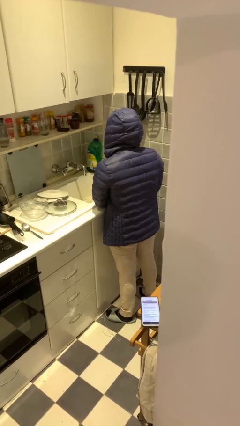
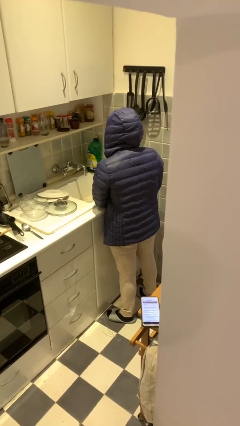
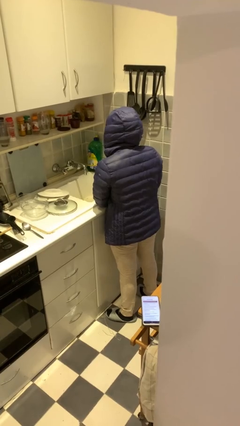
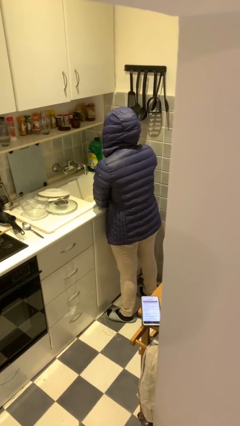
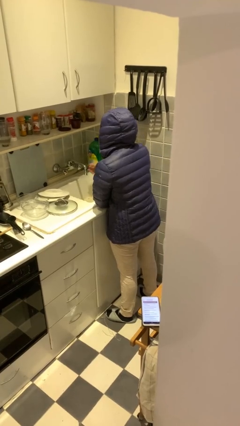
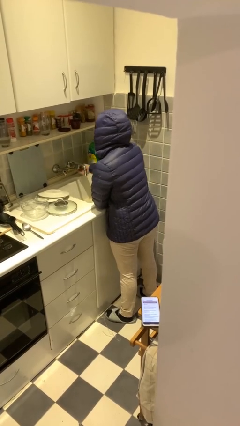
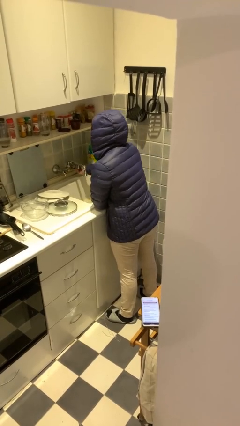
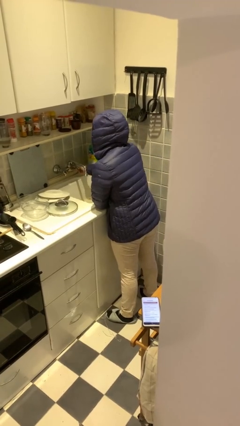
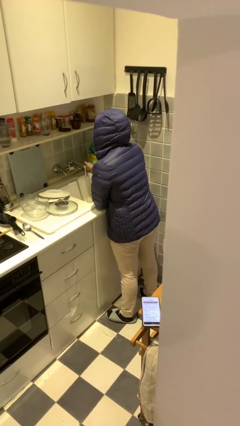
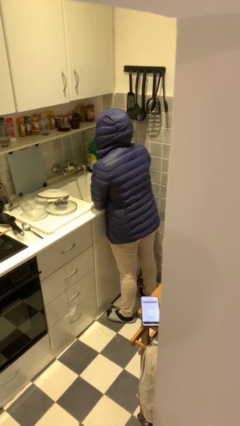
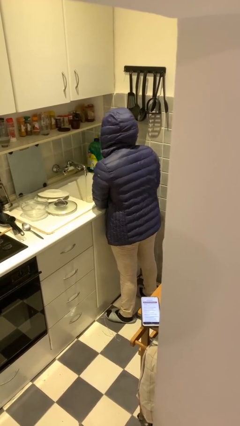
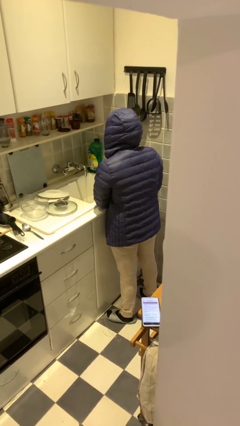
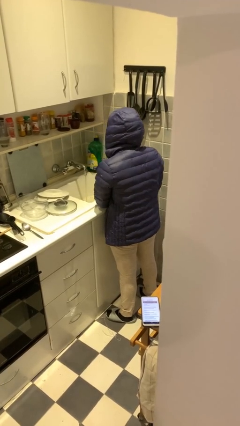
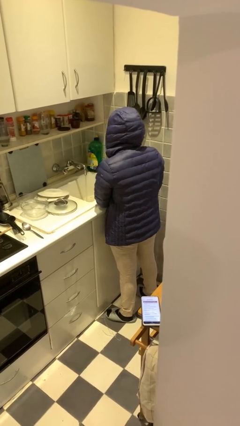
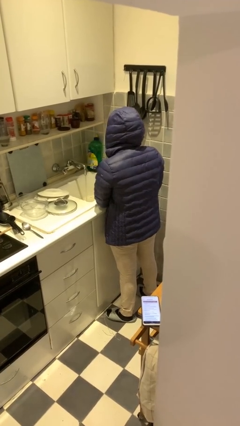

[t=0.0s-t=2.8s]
person turns on faucet

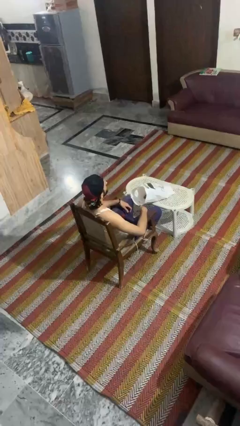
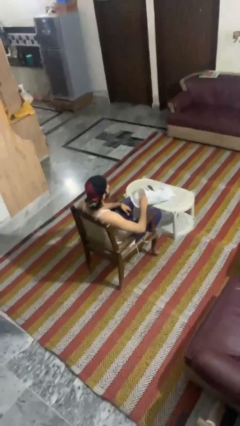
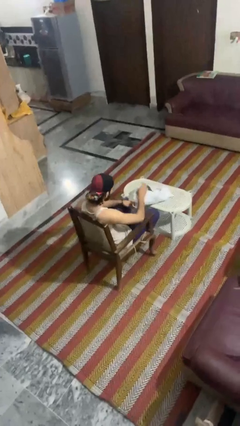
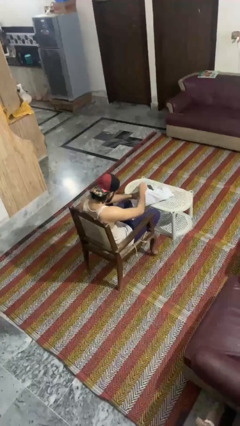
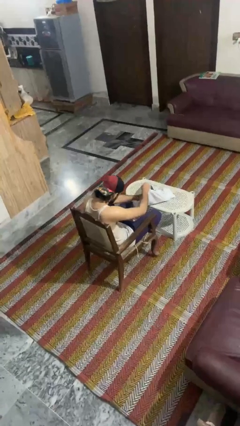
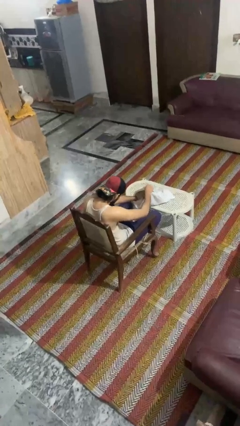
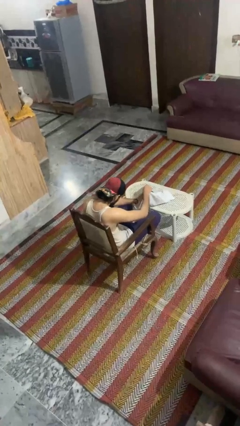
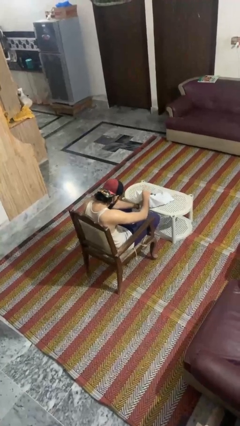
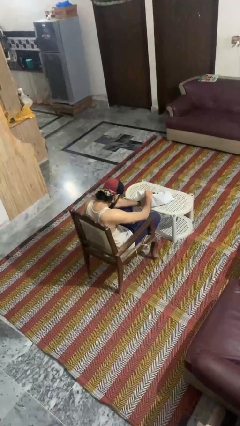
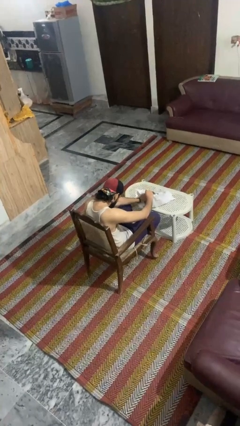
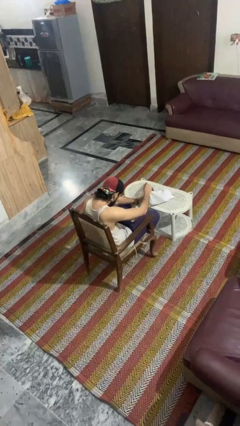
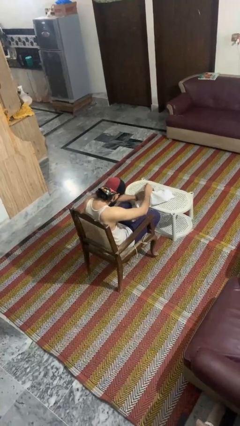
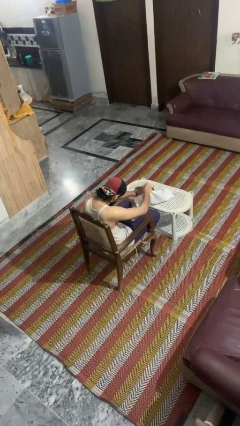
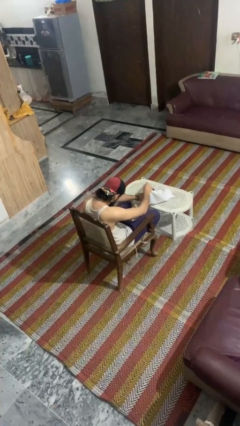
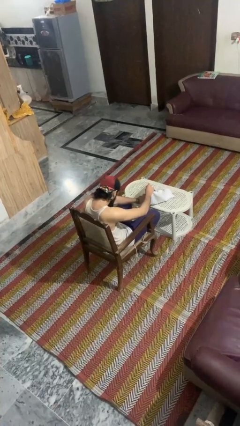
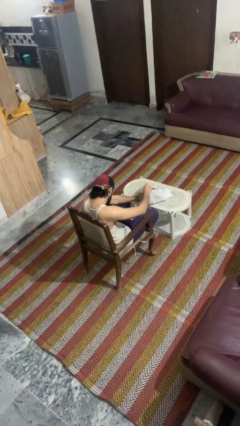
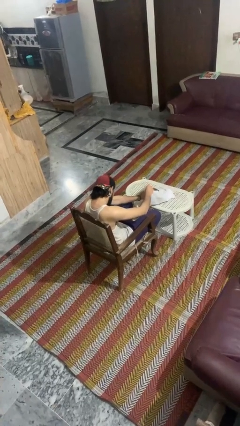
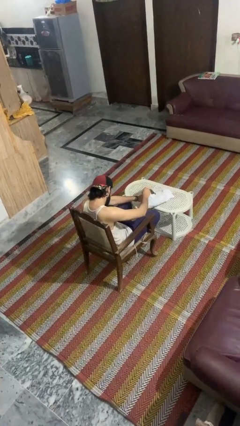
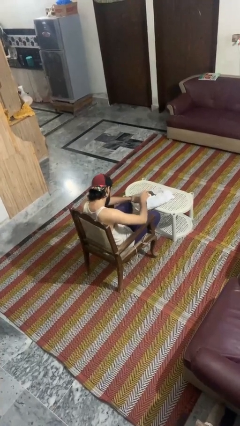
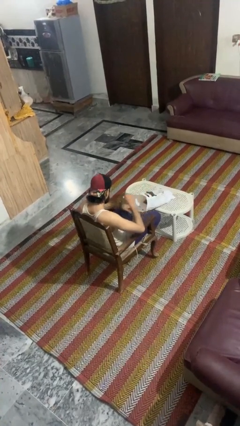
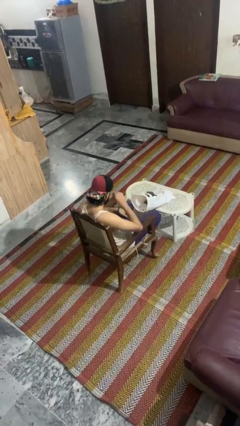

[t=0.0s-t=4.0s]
person searches in bag

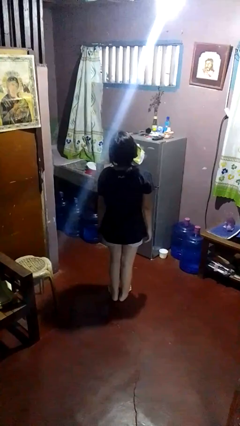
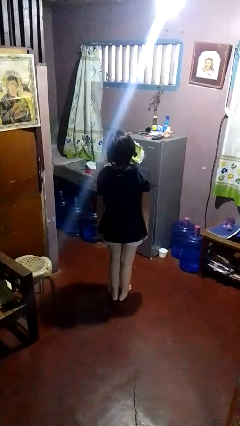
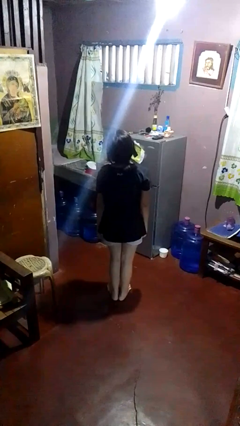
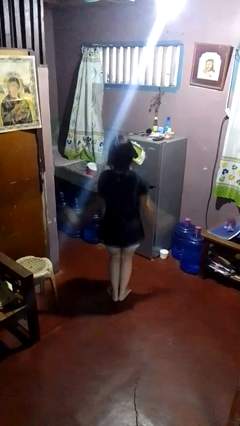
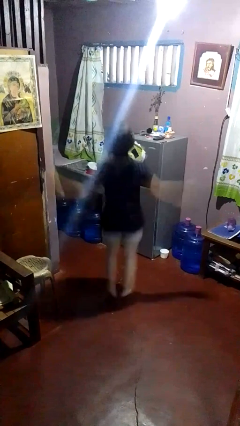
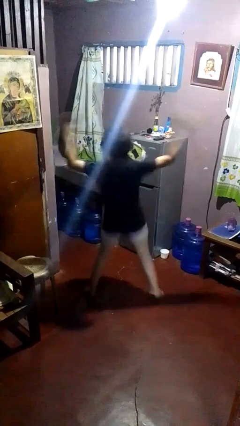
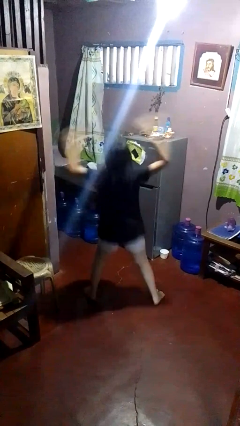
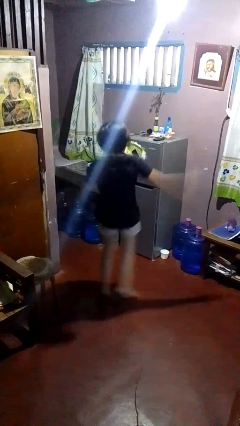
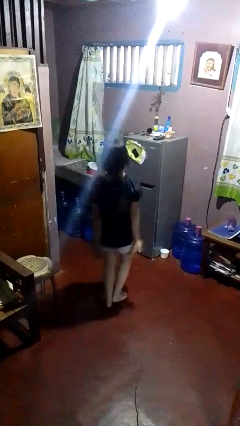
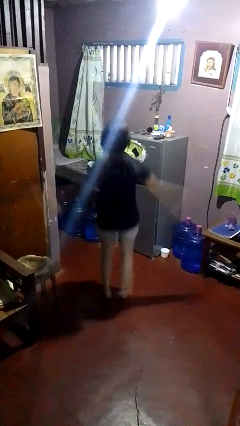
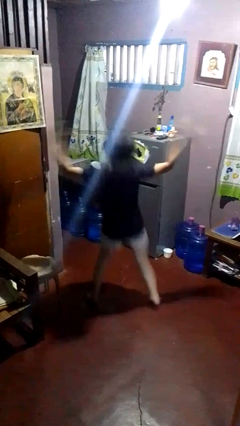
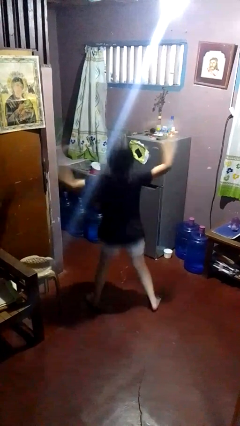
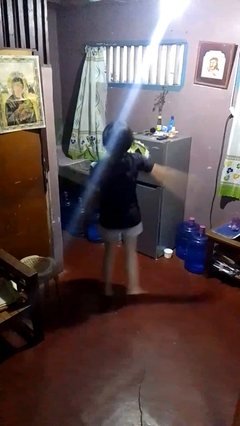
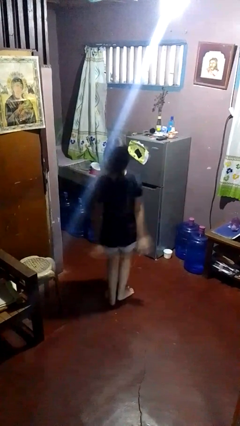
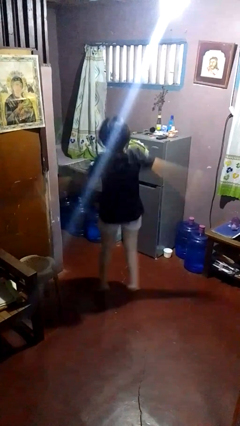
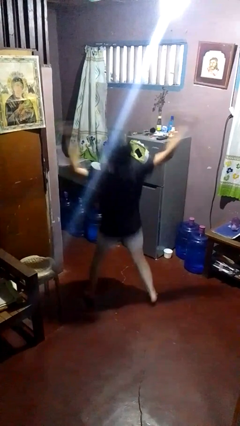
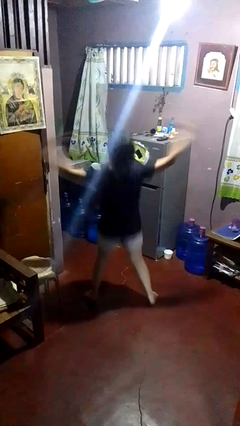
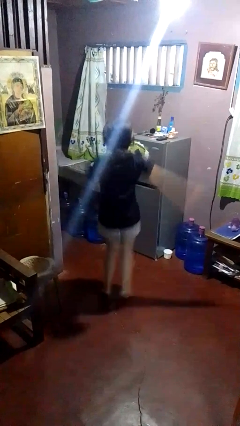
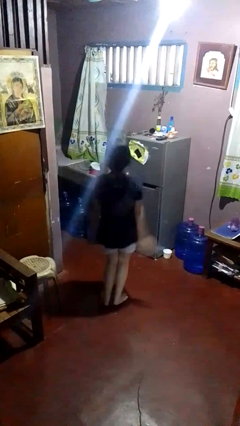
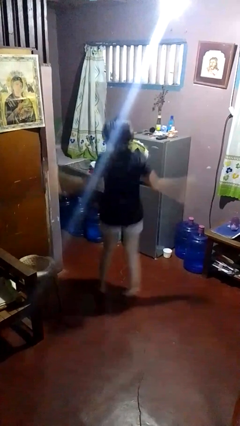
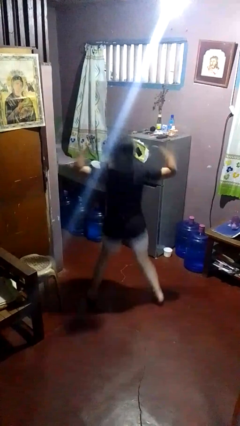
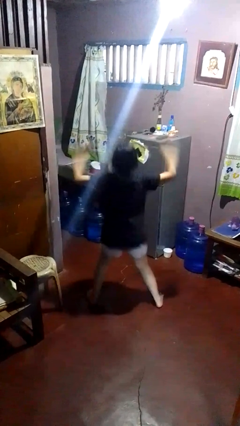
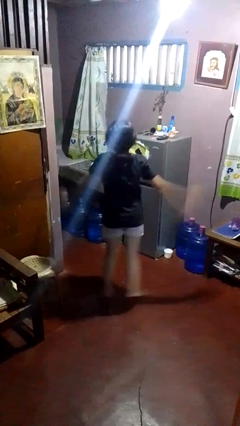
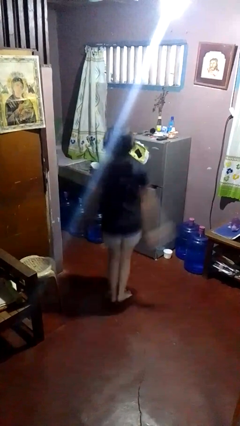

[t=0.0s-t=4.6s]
person exercises with jumping jacks

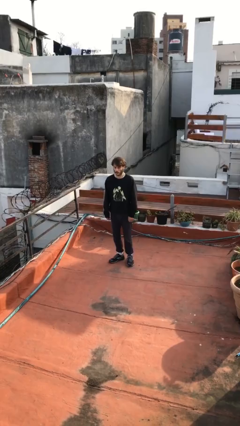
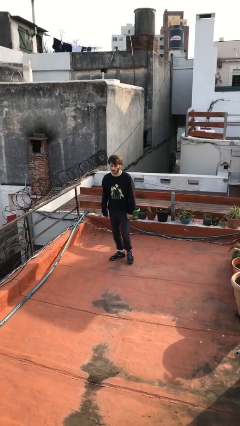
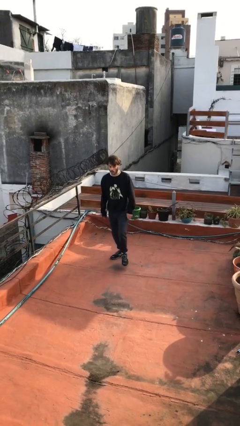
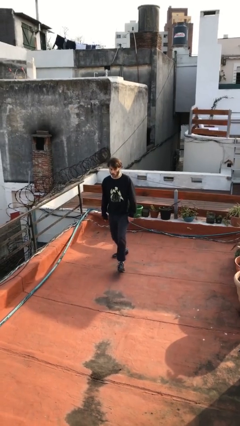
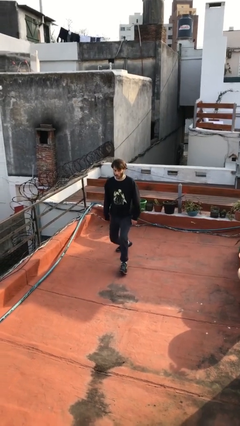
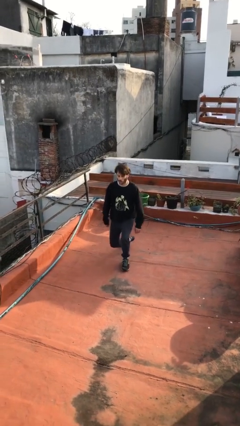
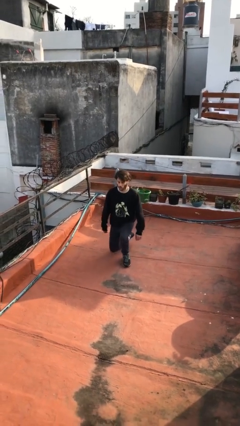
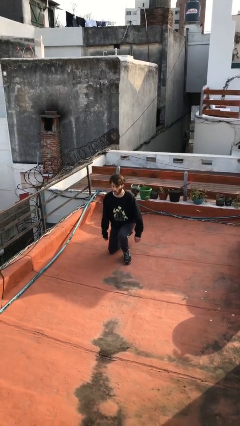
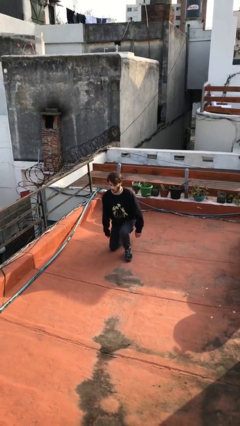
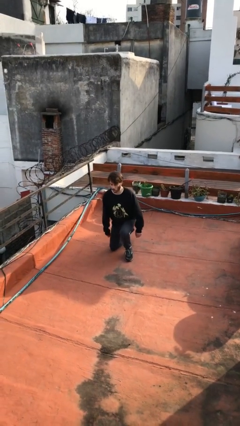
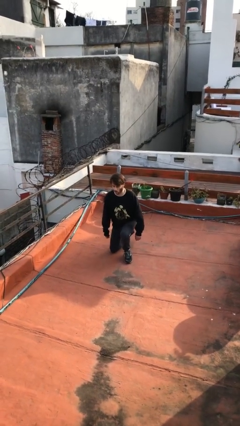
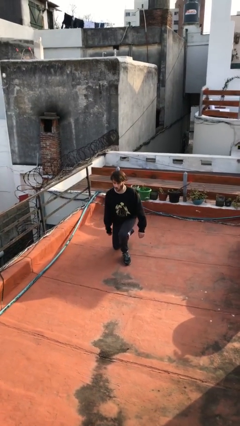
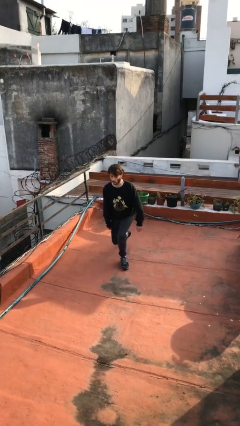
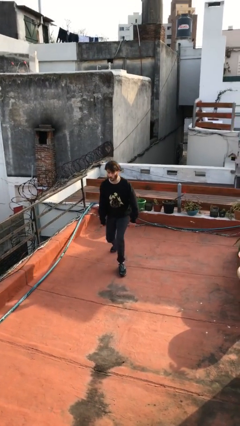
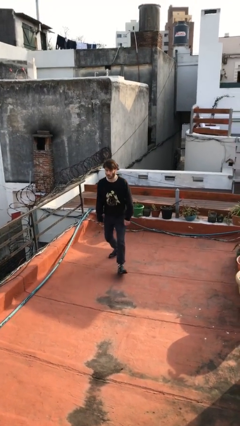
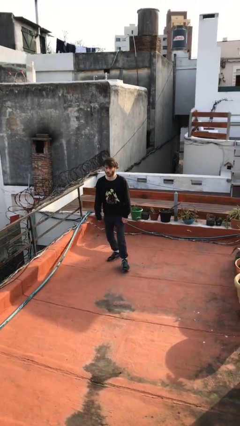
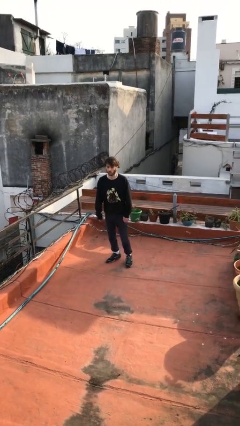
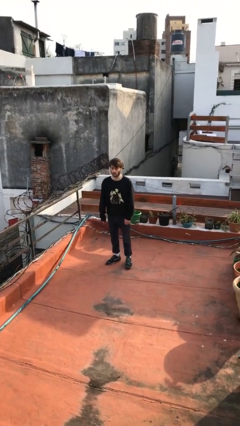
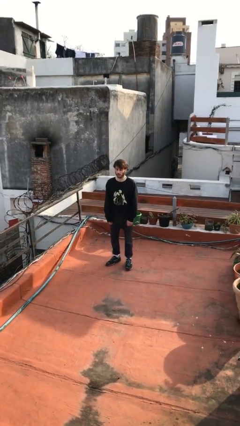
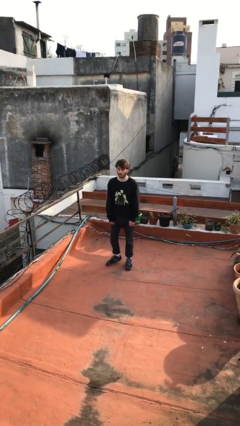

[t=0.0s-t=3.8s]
person exercises with lunges

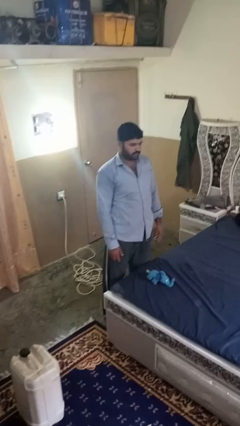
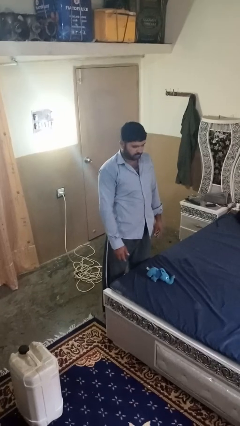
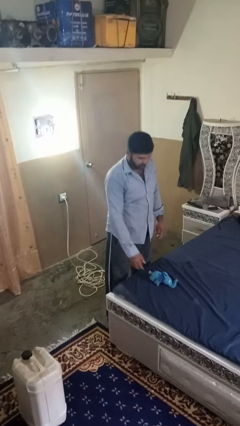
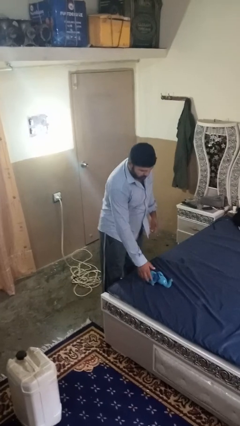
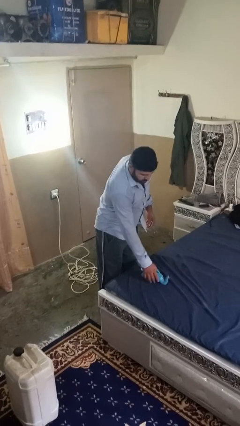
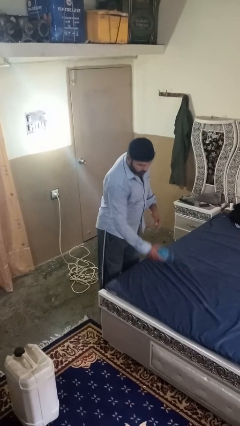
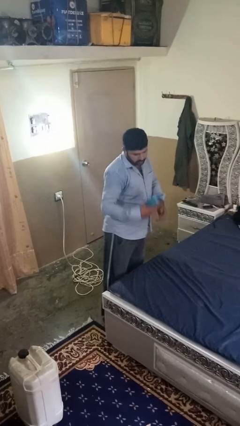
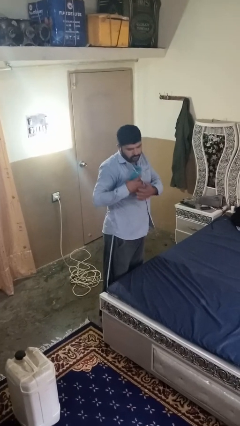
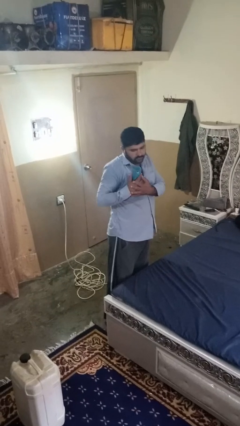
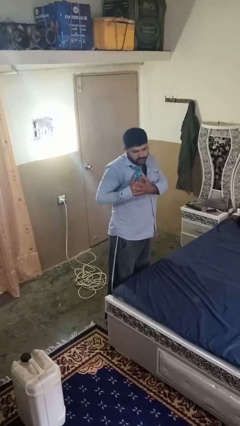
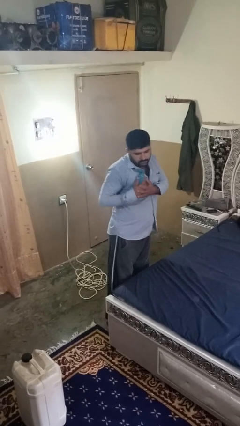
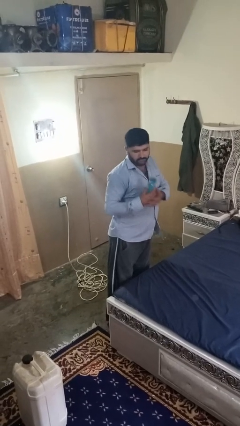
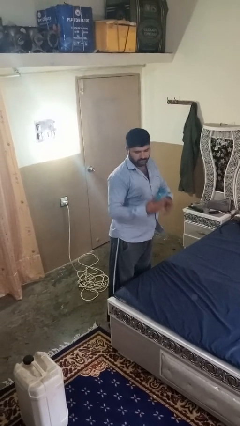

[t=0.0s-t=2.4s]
person hugs stuffed animal
